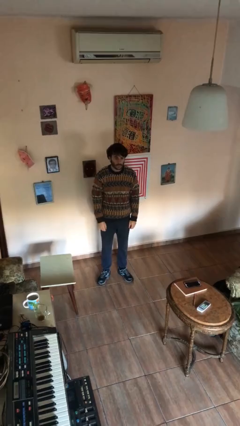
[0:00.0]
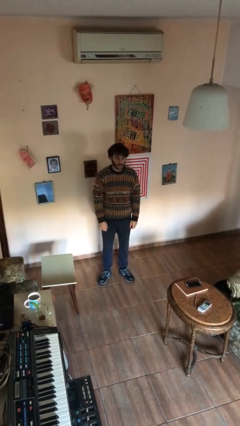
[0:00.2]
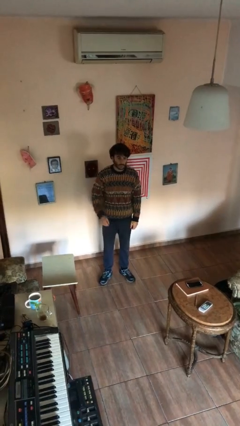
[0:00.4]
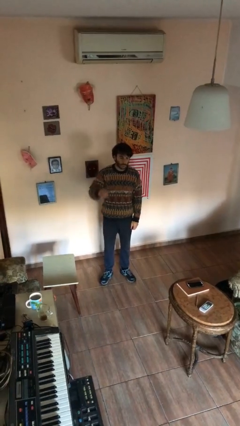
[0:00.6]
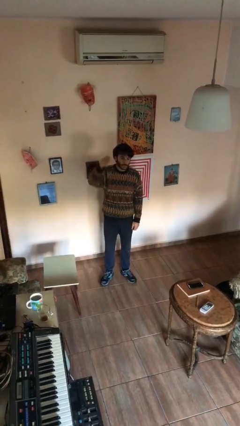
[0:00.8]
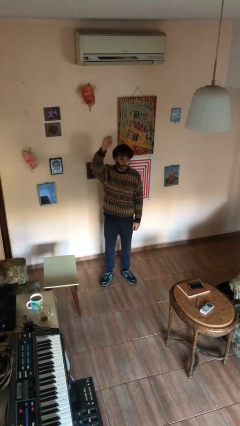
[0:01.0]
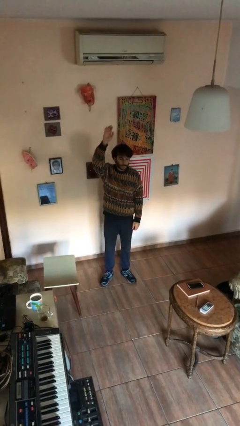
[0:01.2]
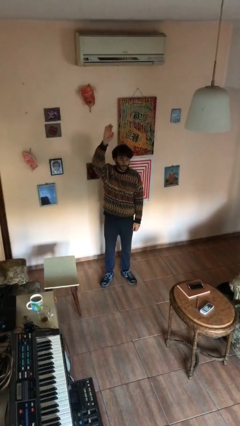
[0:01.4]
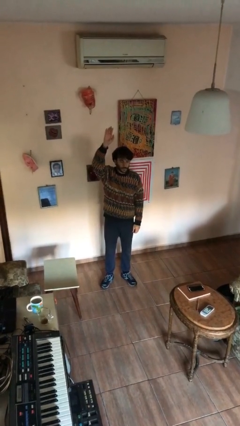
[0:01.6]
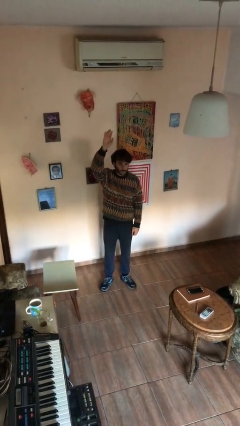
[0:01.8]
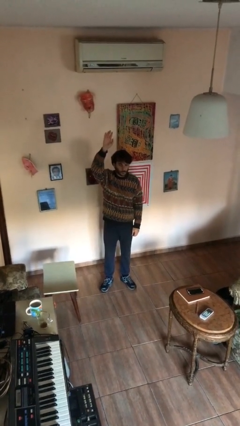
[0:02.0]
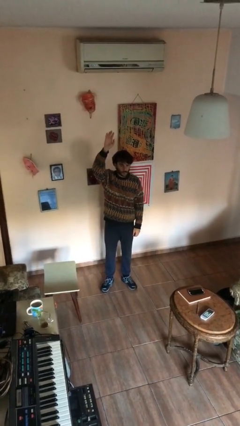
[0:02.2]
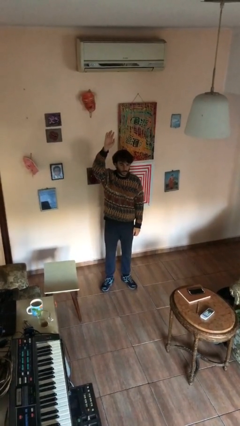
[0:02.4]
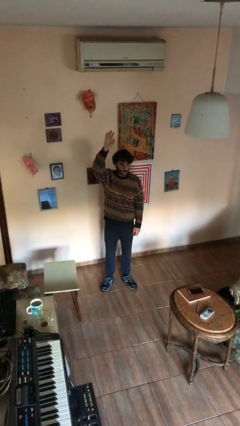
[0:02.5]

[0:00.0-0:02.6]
person gestures raise hand

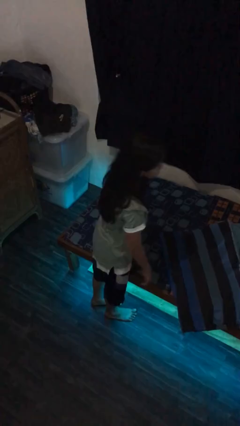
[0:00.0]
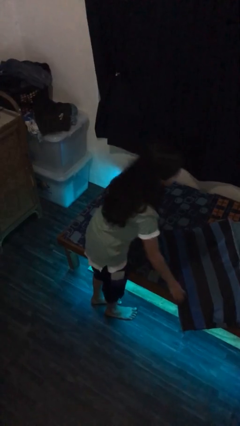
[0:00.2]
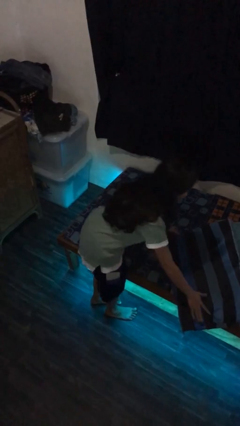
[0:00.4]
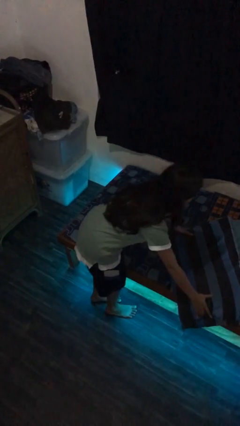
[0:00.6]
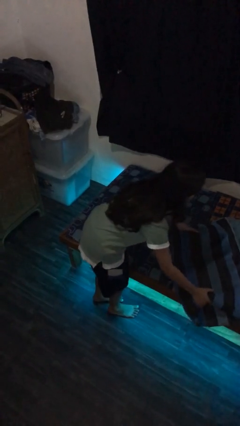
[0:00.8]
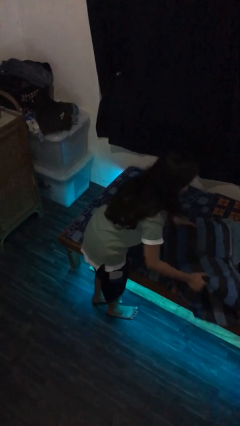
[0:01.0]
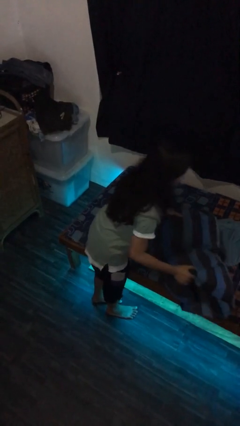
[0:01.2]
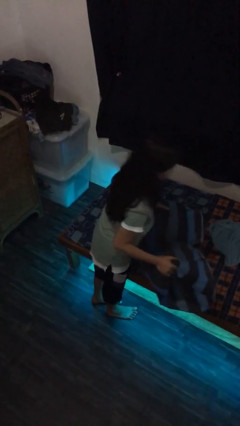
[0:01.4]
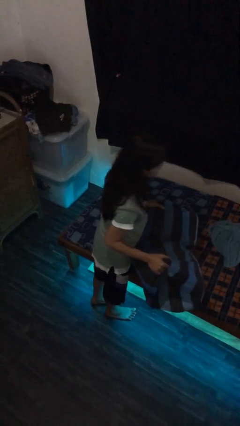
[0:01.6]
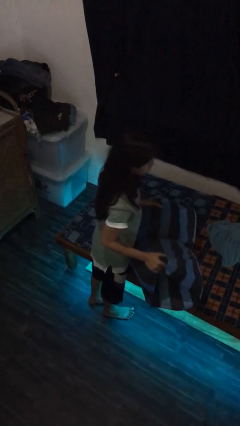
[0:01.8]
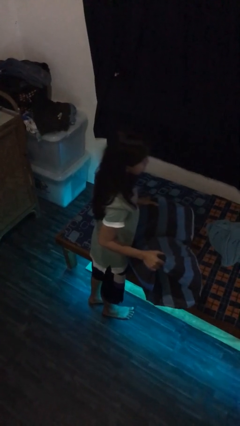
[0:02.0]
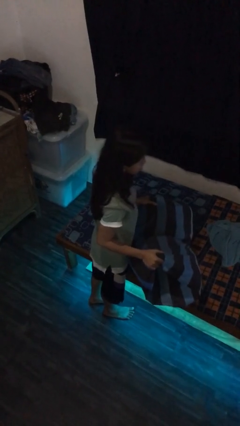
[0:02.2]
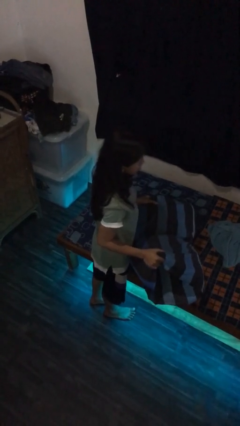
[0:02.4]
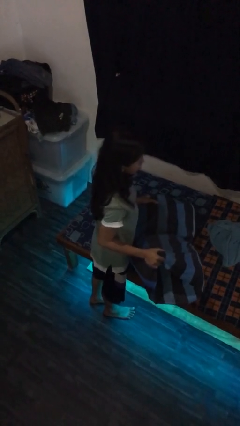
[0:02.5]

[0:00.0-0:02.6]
person picks up object from bed

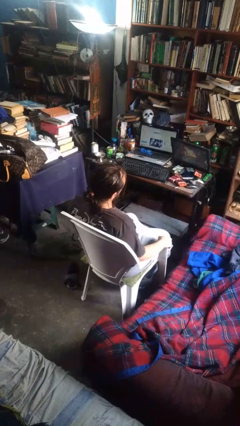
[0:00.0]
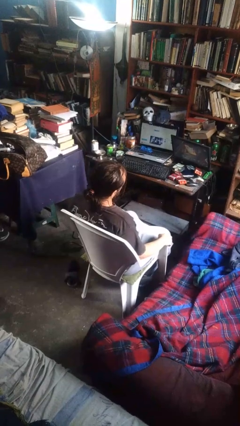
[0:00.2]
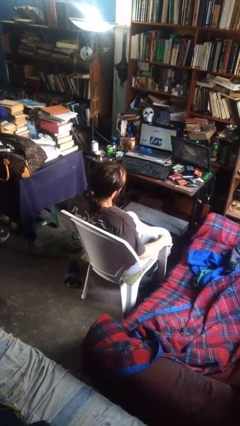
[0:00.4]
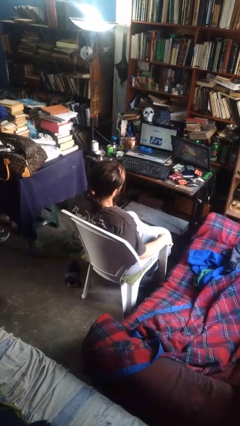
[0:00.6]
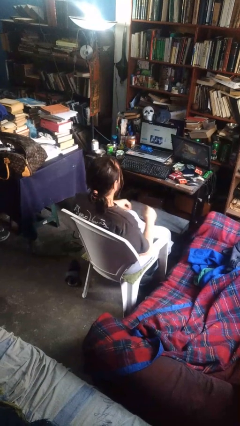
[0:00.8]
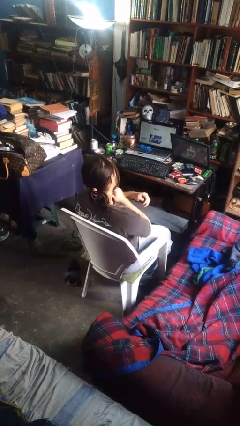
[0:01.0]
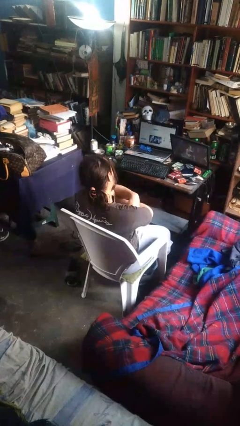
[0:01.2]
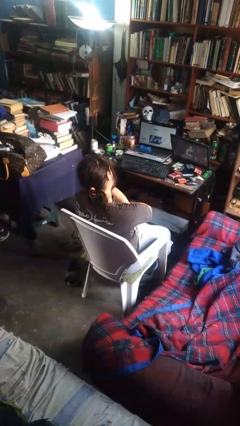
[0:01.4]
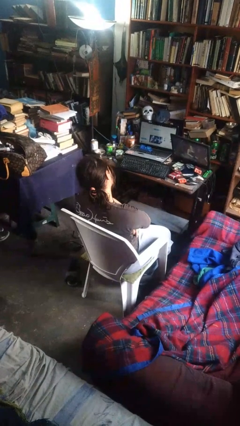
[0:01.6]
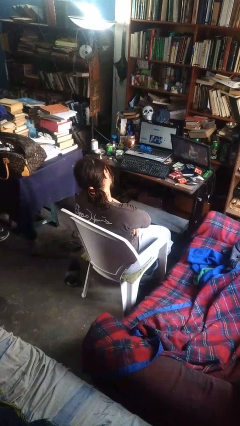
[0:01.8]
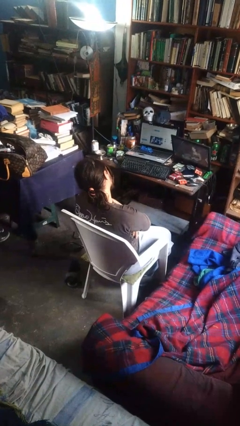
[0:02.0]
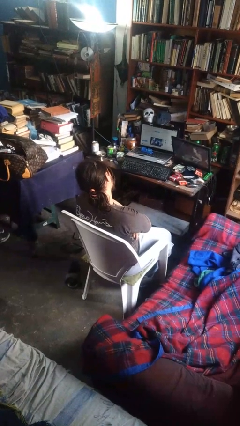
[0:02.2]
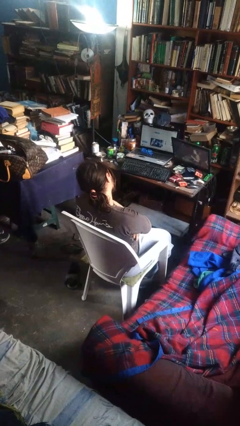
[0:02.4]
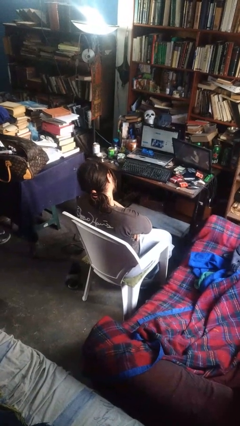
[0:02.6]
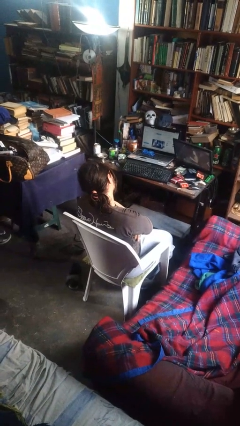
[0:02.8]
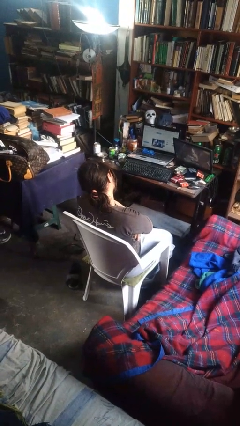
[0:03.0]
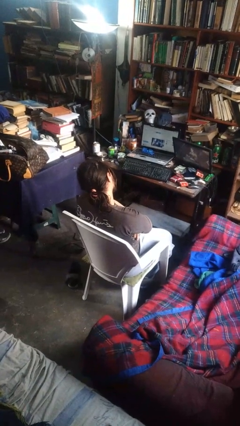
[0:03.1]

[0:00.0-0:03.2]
person crosses arms

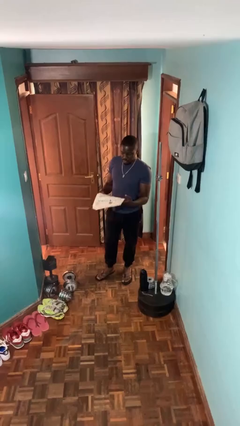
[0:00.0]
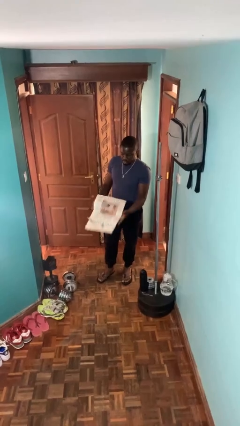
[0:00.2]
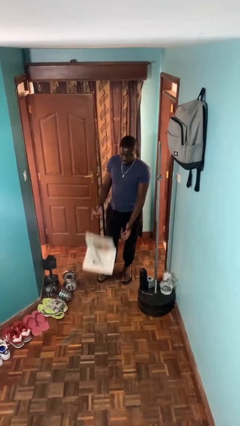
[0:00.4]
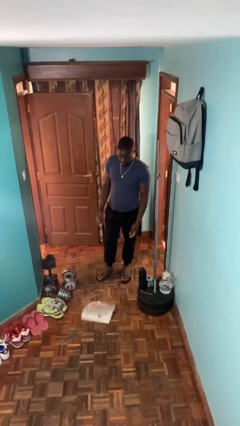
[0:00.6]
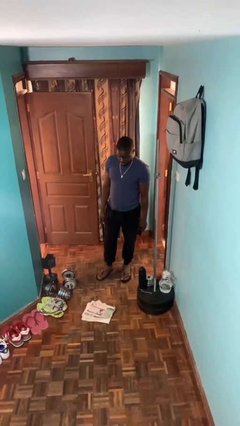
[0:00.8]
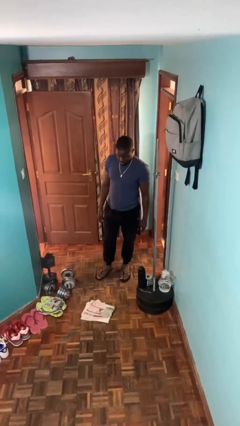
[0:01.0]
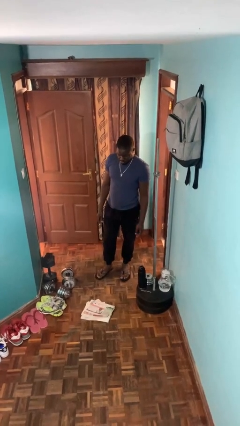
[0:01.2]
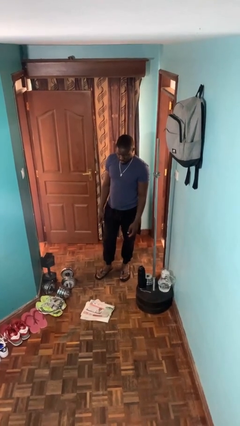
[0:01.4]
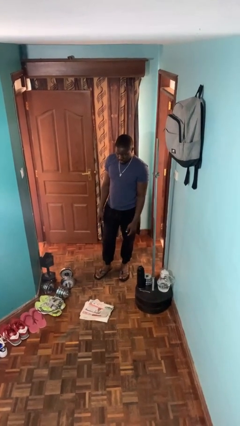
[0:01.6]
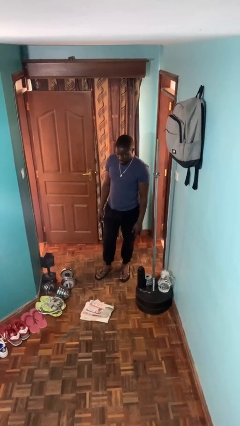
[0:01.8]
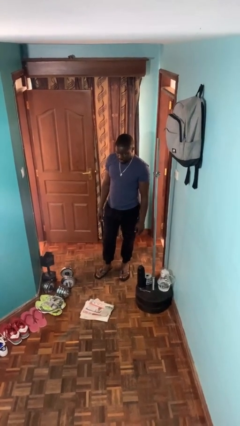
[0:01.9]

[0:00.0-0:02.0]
person drops object

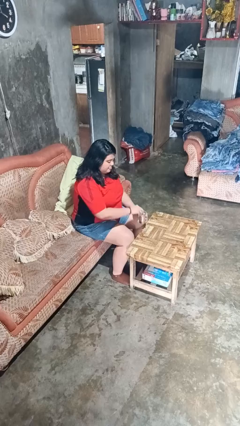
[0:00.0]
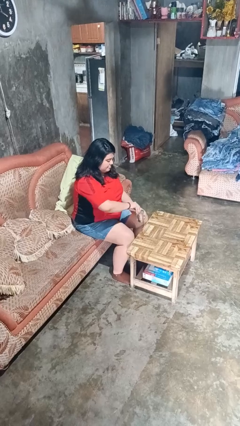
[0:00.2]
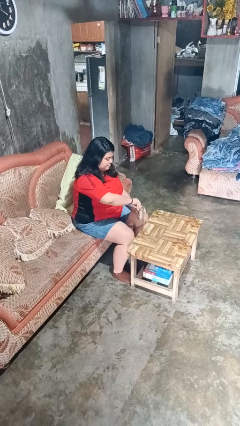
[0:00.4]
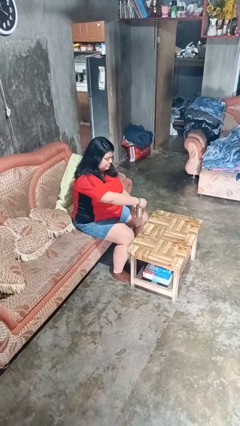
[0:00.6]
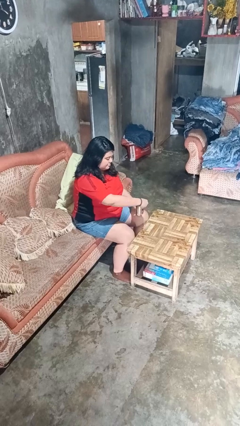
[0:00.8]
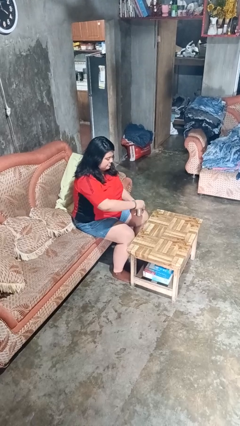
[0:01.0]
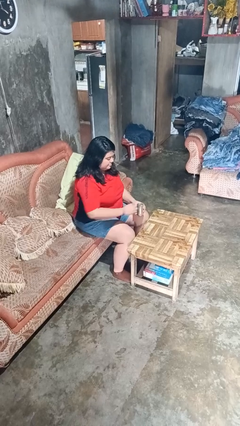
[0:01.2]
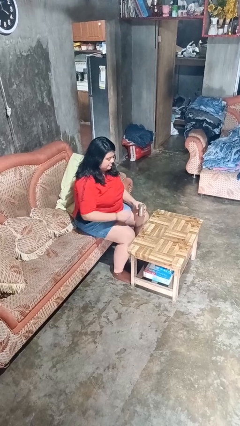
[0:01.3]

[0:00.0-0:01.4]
person opens beverage can

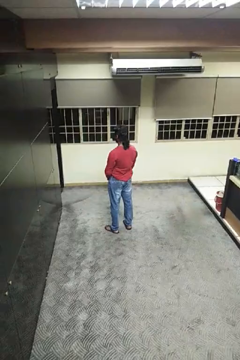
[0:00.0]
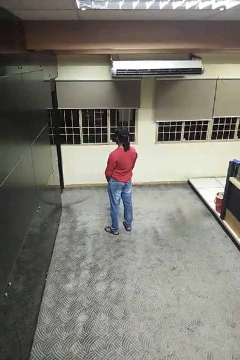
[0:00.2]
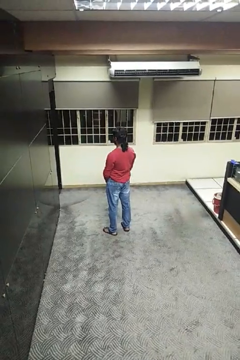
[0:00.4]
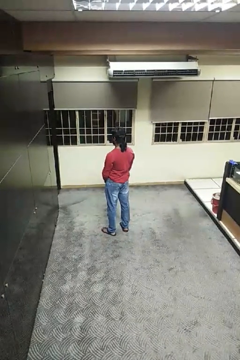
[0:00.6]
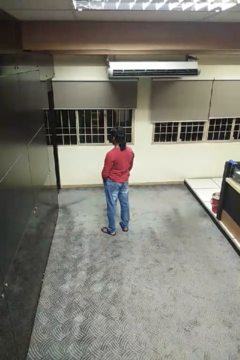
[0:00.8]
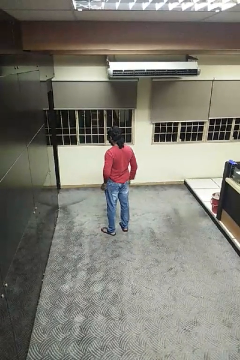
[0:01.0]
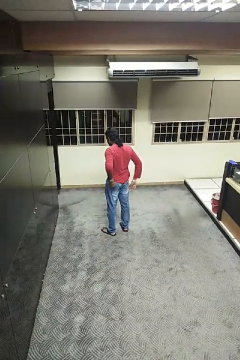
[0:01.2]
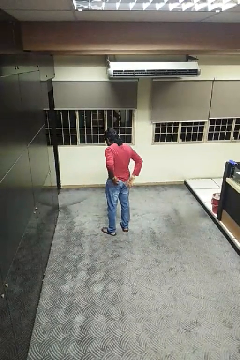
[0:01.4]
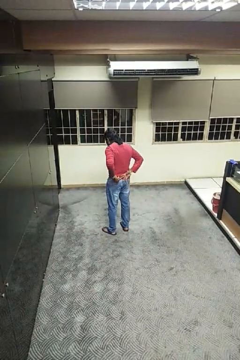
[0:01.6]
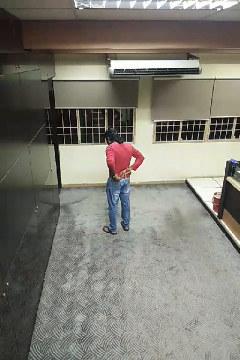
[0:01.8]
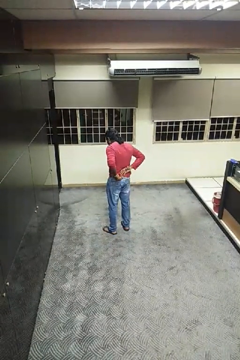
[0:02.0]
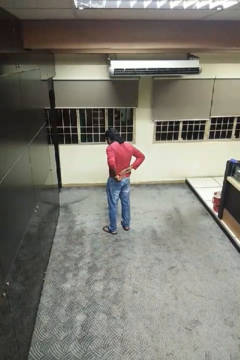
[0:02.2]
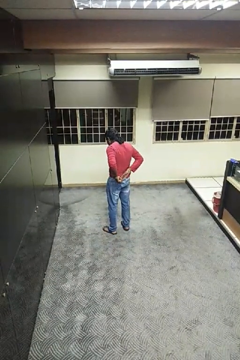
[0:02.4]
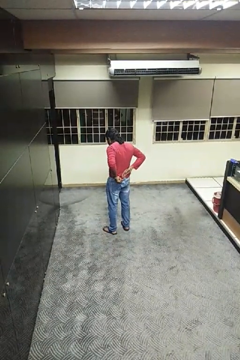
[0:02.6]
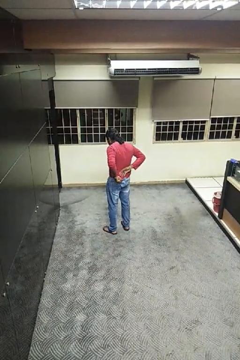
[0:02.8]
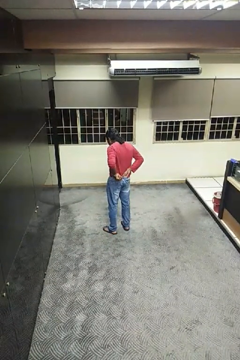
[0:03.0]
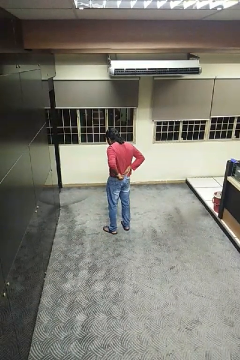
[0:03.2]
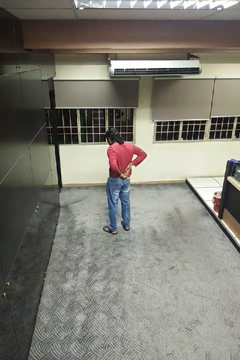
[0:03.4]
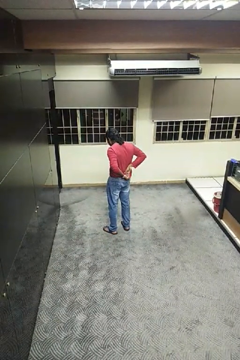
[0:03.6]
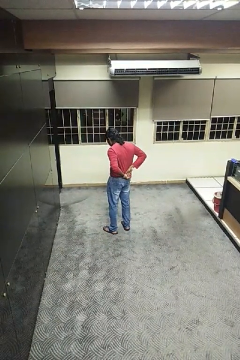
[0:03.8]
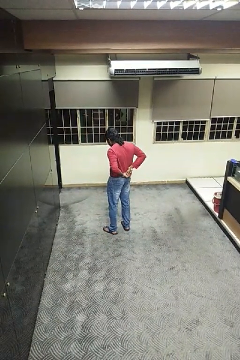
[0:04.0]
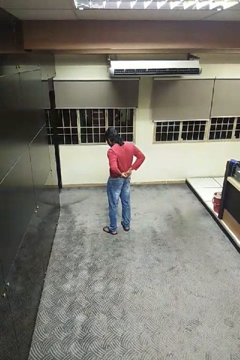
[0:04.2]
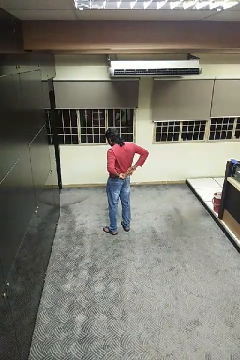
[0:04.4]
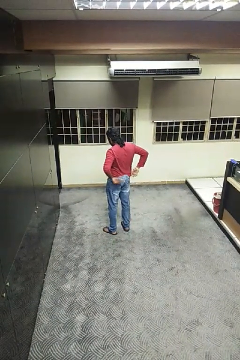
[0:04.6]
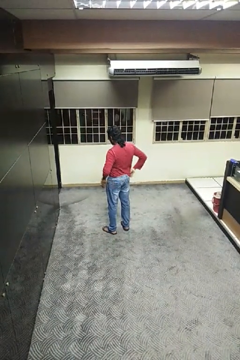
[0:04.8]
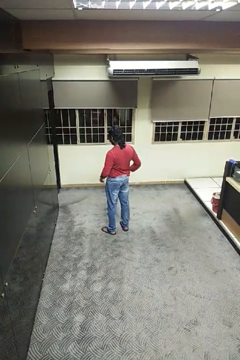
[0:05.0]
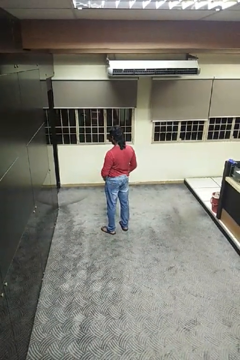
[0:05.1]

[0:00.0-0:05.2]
person tucks in shirt

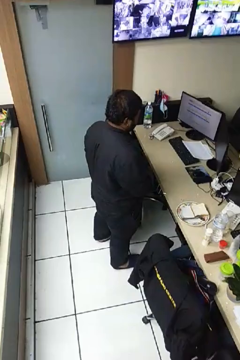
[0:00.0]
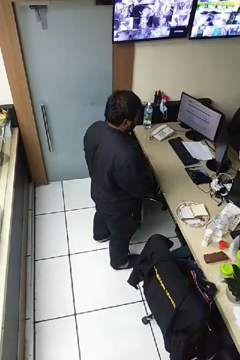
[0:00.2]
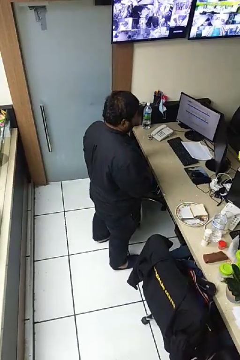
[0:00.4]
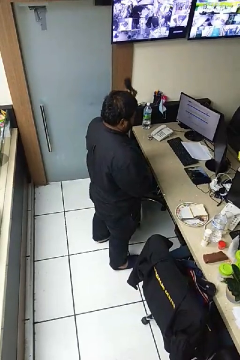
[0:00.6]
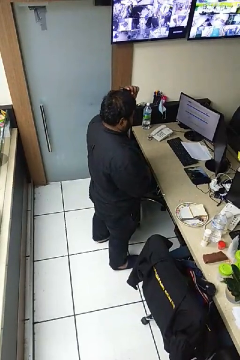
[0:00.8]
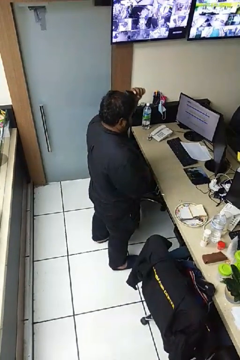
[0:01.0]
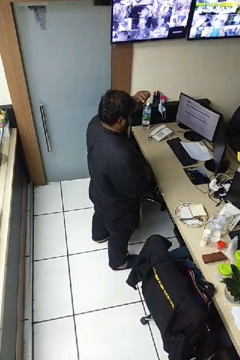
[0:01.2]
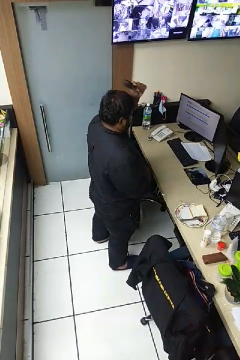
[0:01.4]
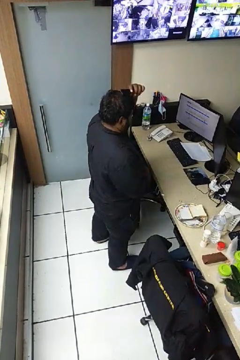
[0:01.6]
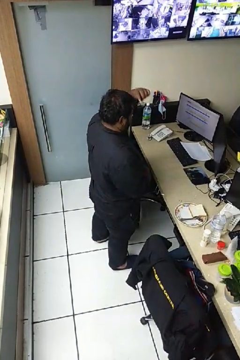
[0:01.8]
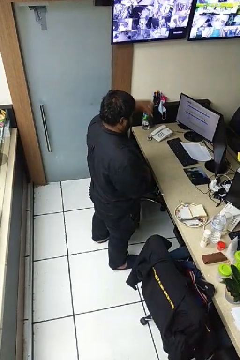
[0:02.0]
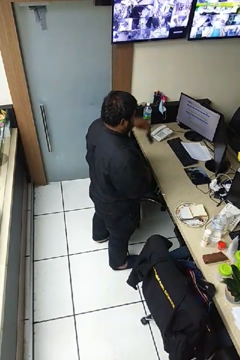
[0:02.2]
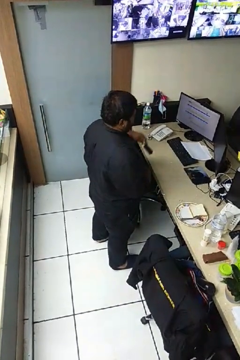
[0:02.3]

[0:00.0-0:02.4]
person brushes hair
